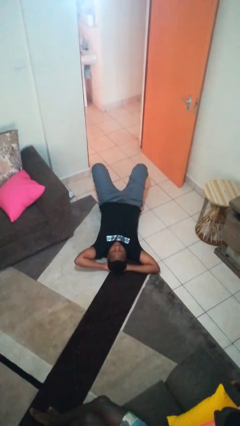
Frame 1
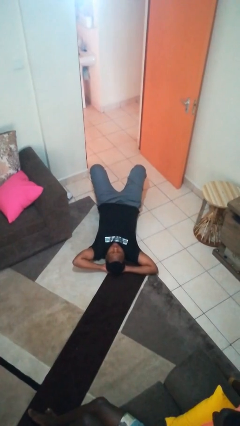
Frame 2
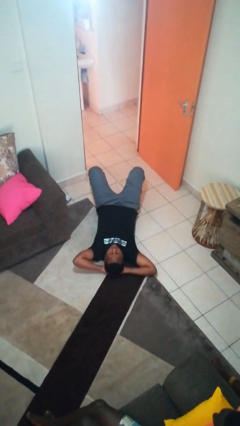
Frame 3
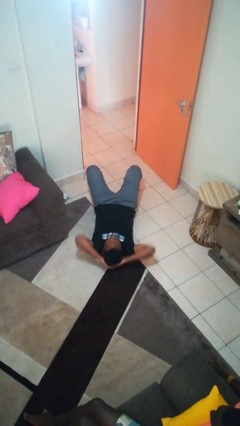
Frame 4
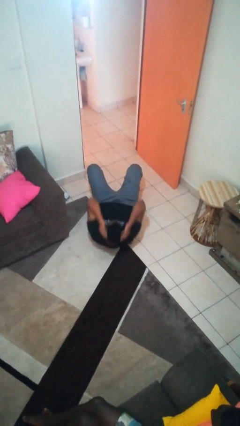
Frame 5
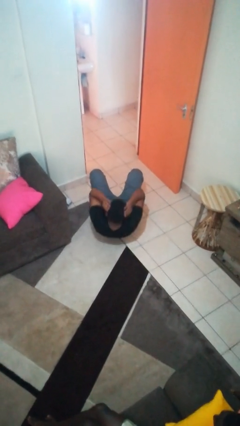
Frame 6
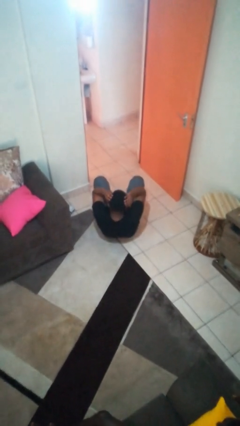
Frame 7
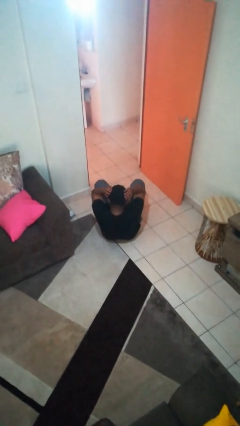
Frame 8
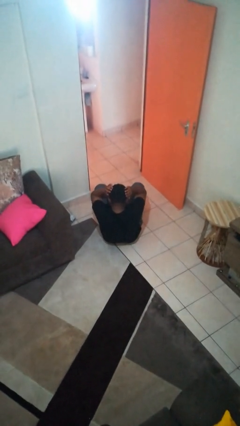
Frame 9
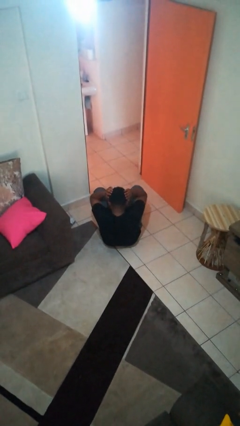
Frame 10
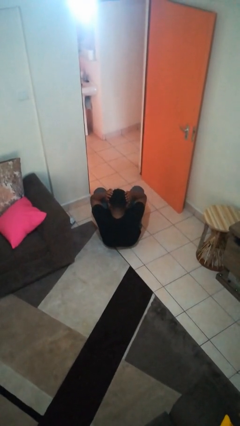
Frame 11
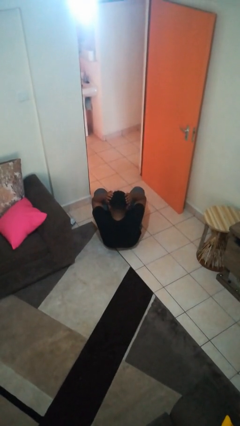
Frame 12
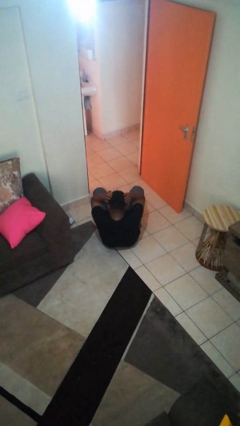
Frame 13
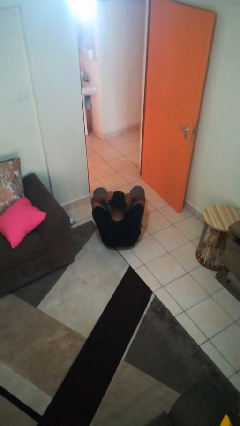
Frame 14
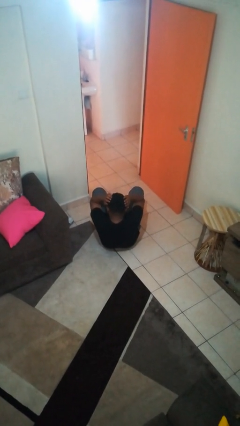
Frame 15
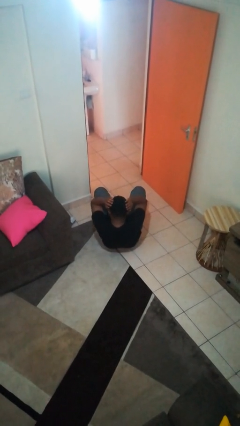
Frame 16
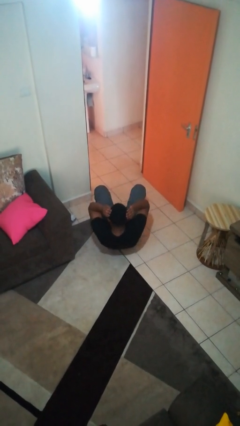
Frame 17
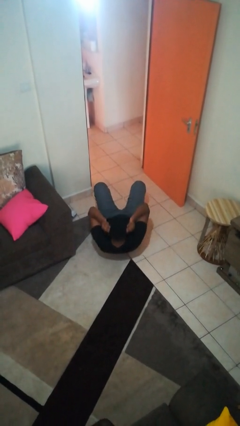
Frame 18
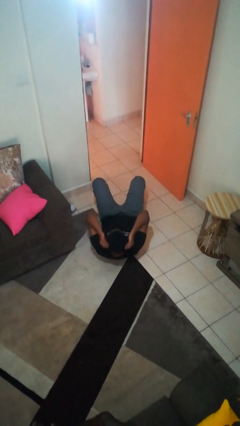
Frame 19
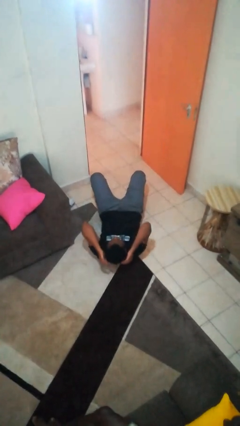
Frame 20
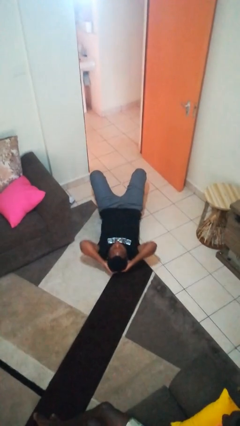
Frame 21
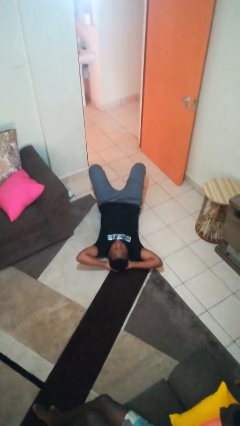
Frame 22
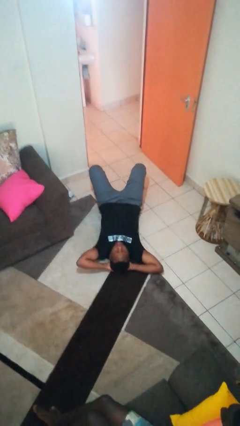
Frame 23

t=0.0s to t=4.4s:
person exercises with situp

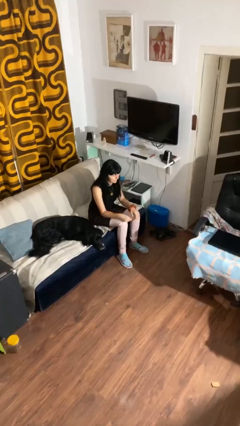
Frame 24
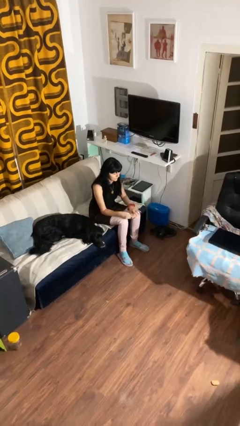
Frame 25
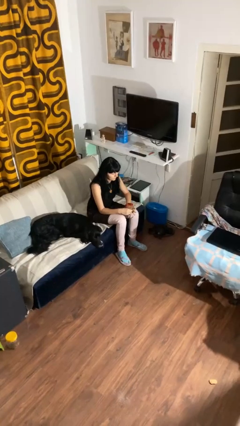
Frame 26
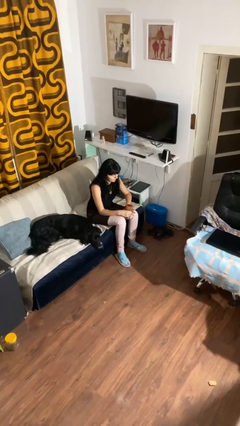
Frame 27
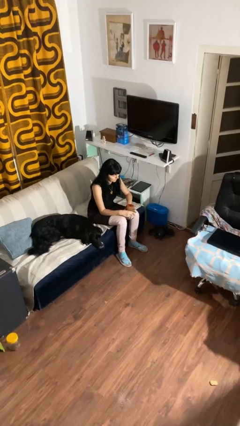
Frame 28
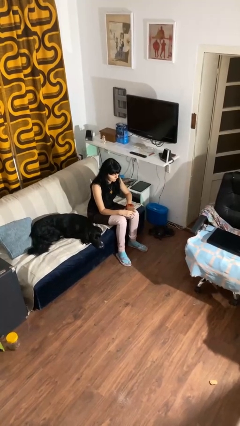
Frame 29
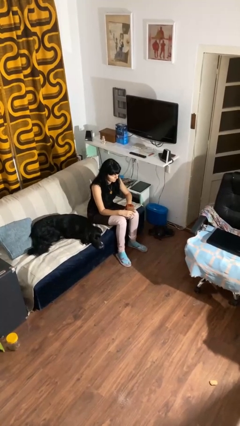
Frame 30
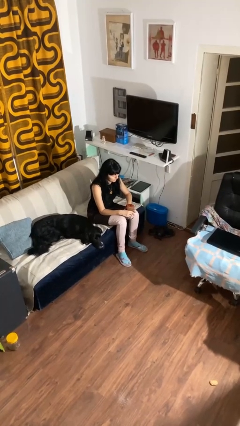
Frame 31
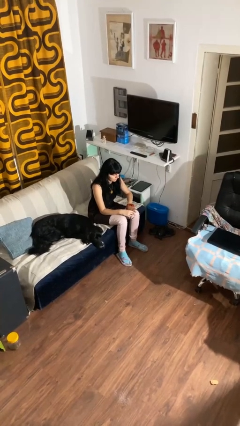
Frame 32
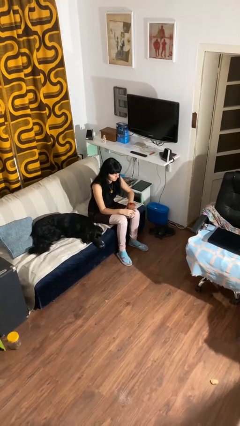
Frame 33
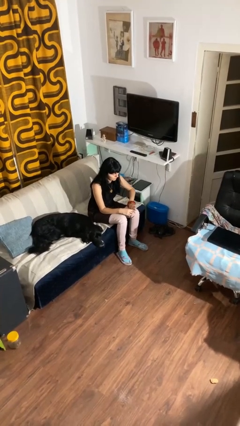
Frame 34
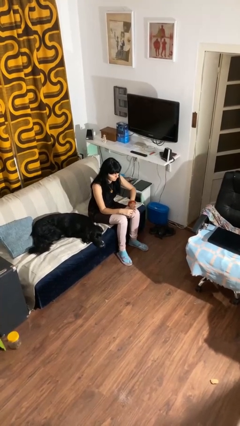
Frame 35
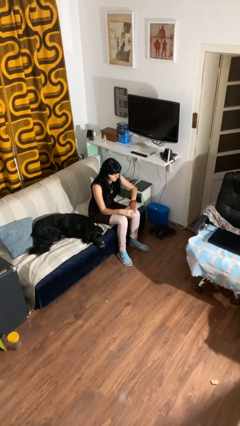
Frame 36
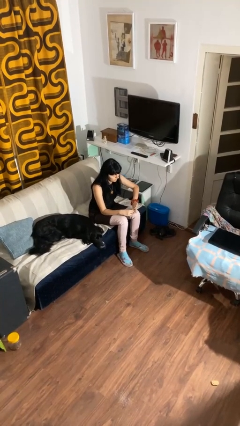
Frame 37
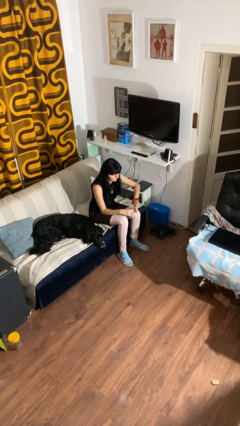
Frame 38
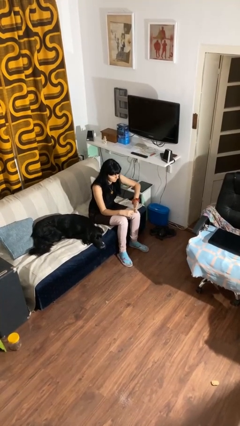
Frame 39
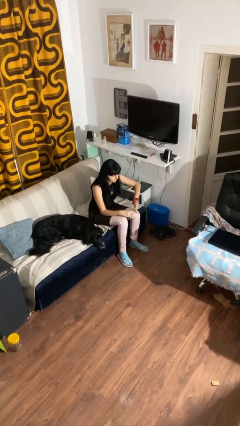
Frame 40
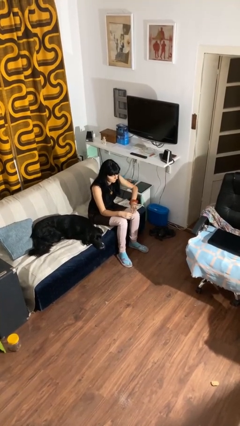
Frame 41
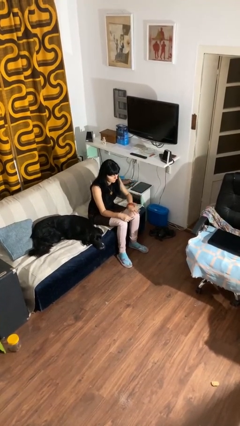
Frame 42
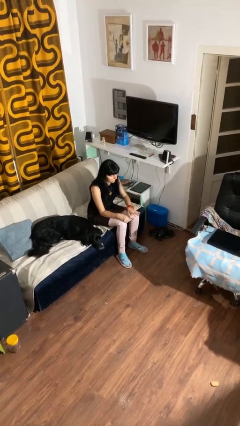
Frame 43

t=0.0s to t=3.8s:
person clips fingernails

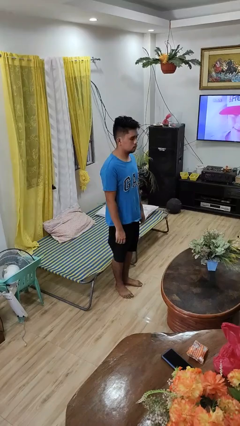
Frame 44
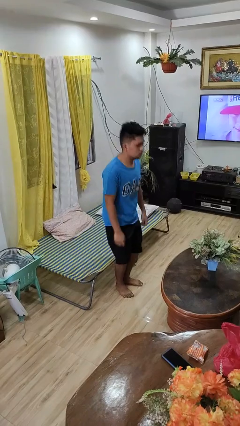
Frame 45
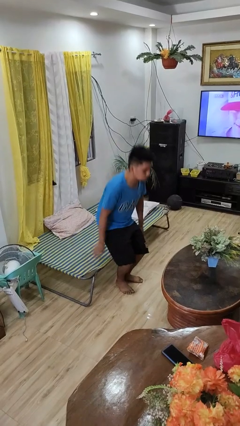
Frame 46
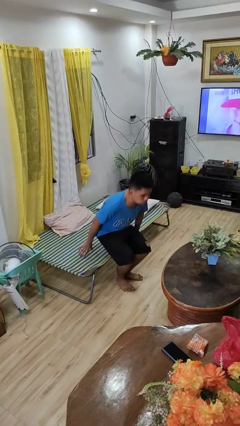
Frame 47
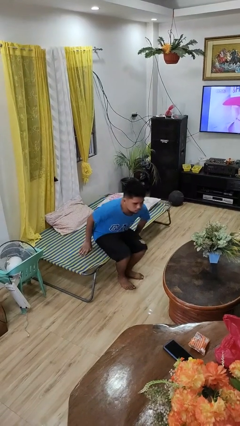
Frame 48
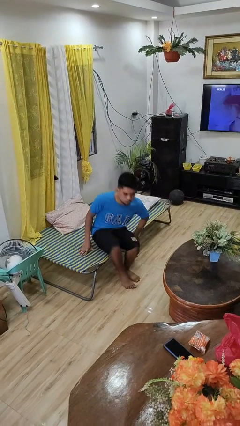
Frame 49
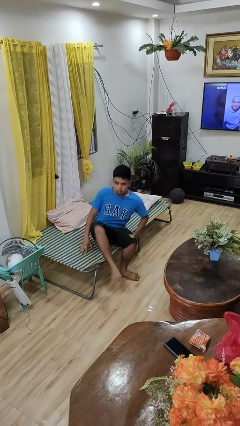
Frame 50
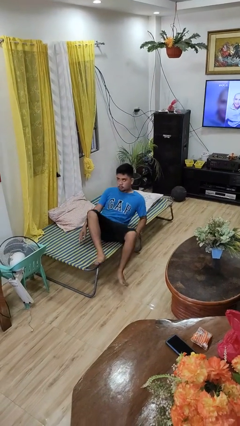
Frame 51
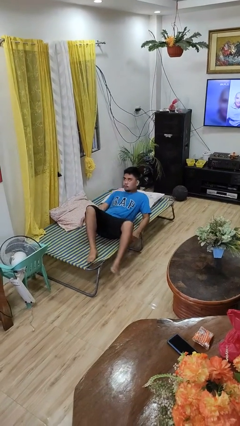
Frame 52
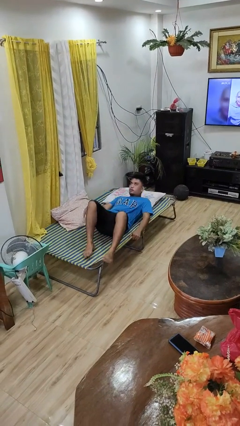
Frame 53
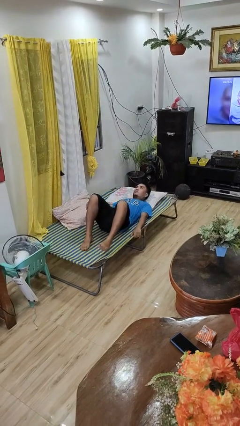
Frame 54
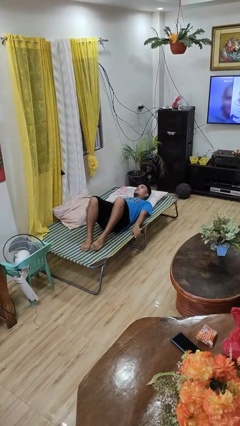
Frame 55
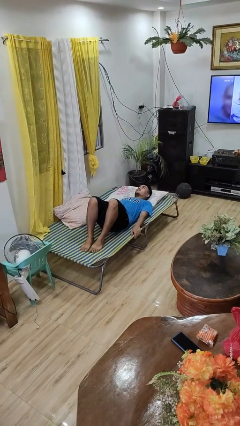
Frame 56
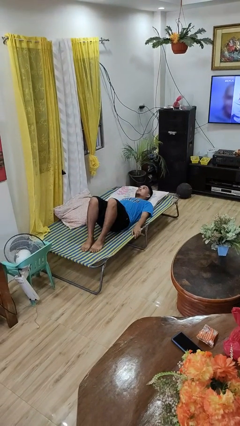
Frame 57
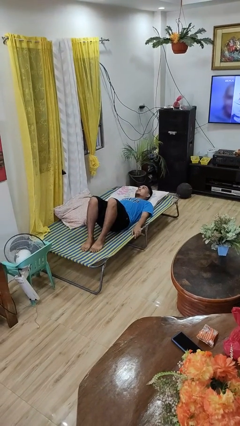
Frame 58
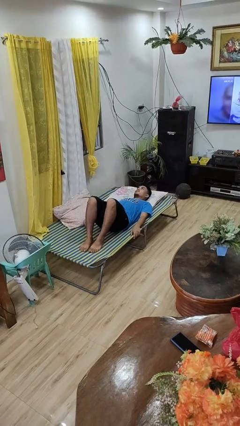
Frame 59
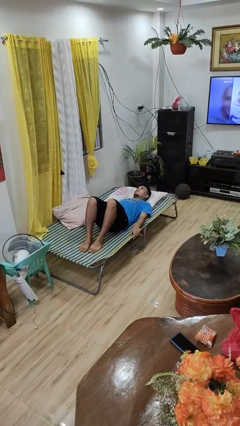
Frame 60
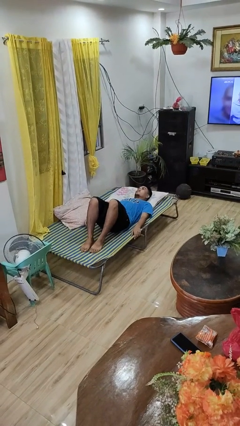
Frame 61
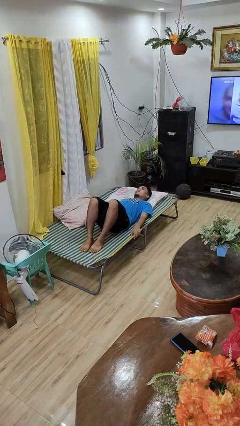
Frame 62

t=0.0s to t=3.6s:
person lies down on bed

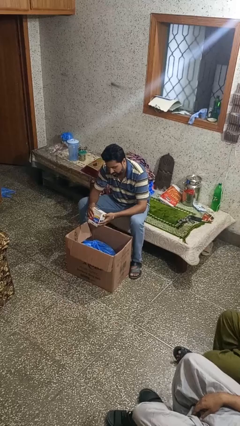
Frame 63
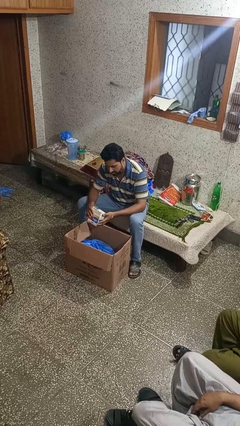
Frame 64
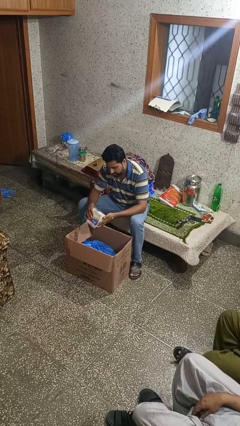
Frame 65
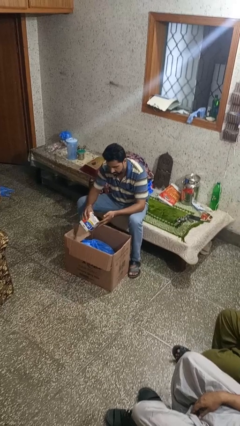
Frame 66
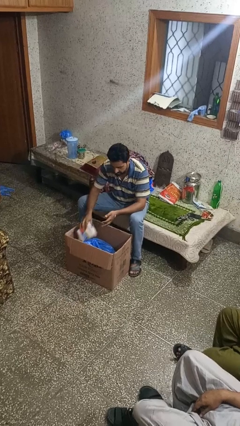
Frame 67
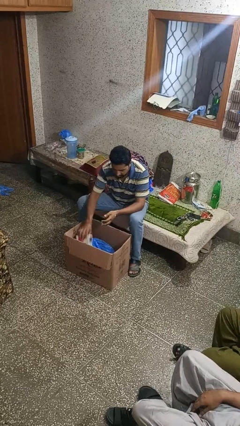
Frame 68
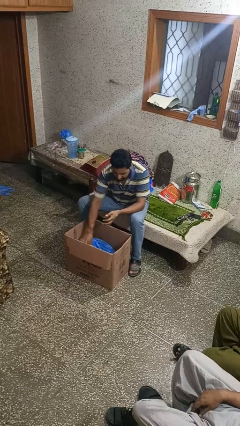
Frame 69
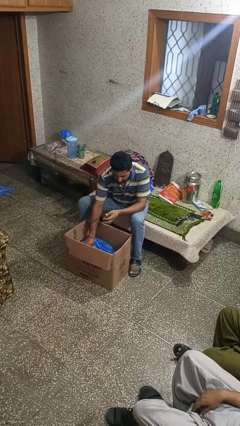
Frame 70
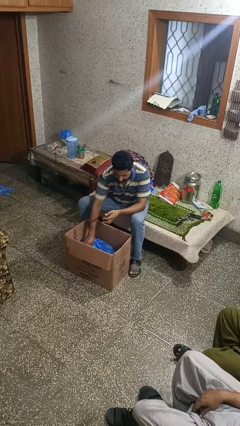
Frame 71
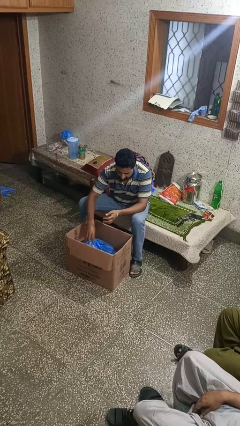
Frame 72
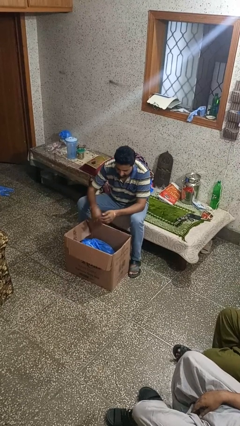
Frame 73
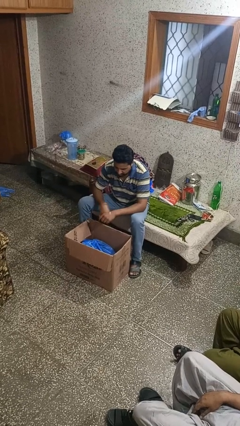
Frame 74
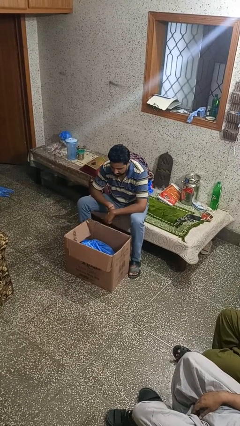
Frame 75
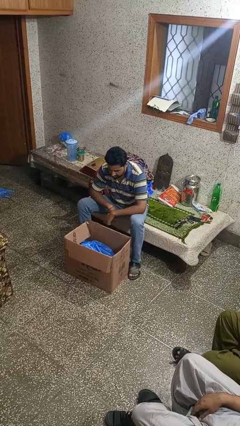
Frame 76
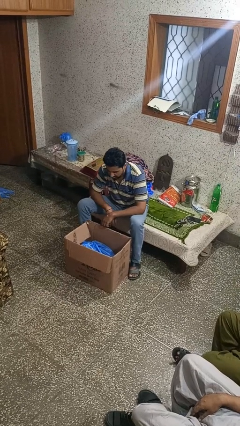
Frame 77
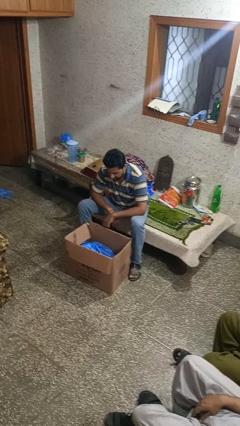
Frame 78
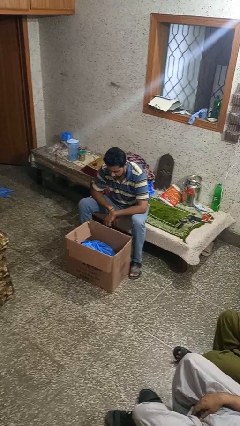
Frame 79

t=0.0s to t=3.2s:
person puts object into box

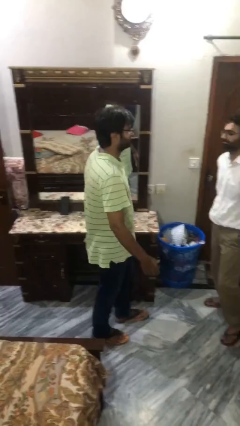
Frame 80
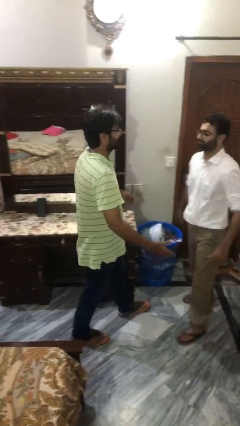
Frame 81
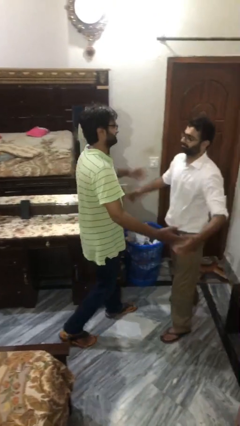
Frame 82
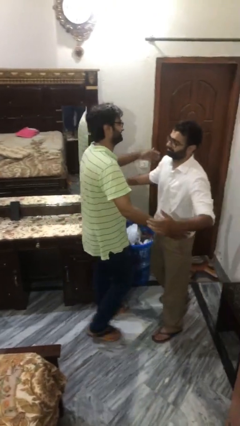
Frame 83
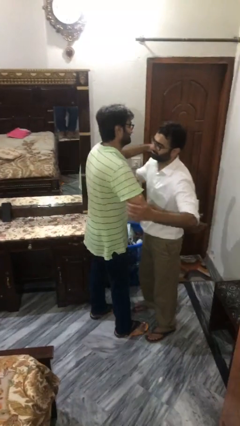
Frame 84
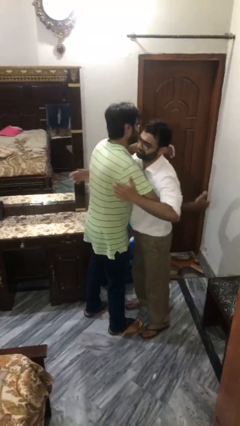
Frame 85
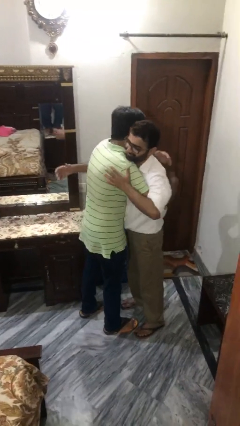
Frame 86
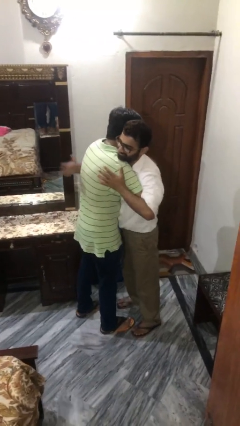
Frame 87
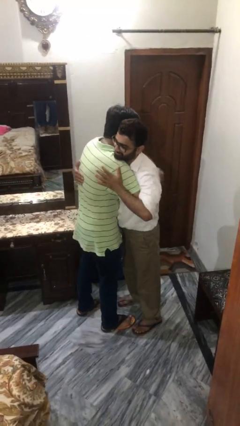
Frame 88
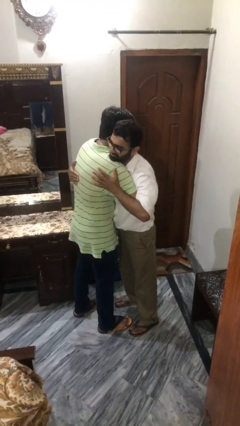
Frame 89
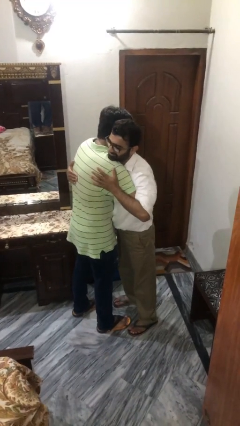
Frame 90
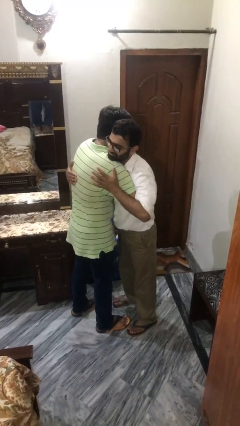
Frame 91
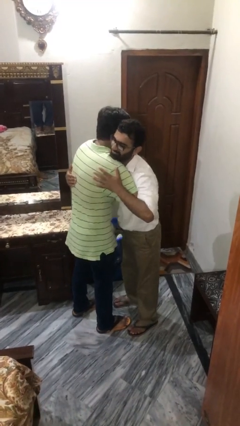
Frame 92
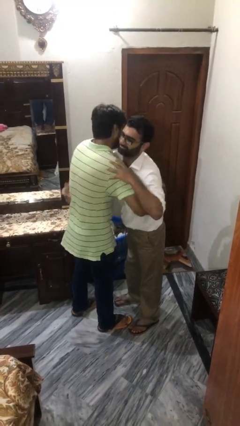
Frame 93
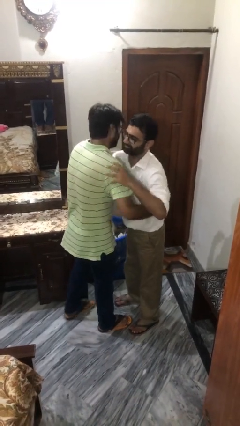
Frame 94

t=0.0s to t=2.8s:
person embraces person
